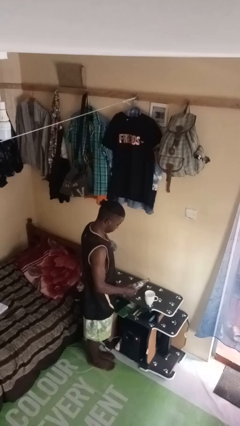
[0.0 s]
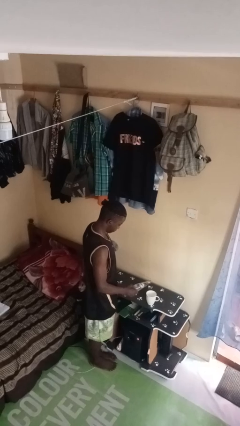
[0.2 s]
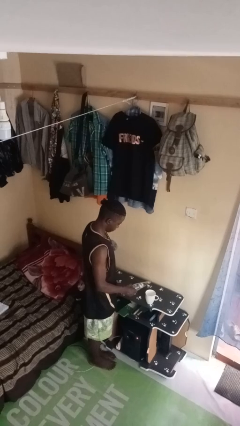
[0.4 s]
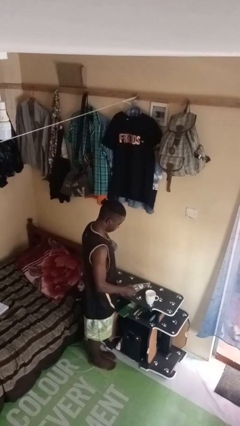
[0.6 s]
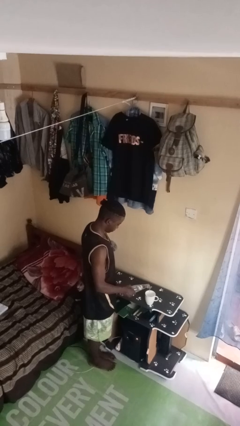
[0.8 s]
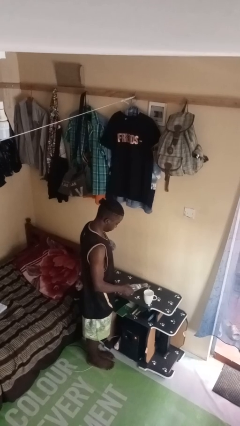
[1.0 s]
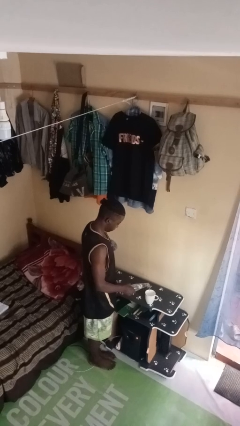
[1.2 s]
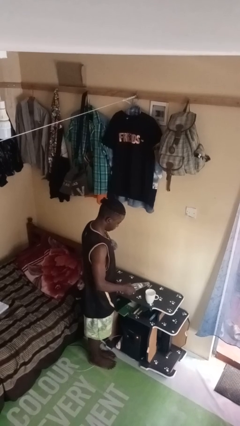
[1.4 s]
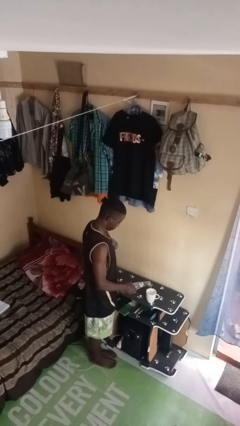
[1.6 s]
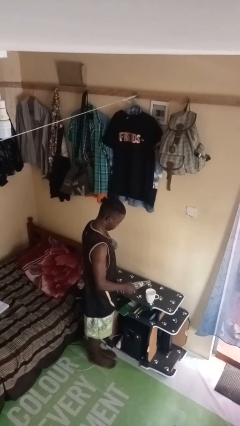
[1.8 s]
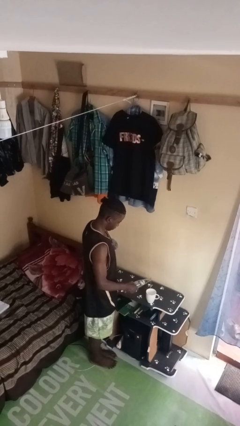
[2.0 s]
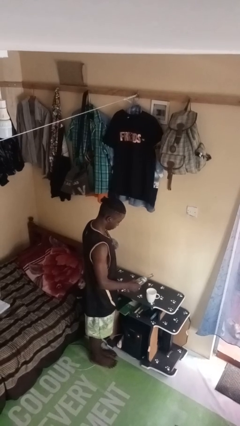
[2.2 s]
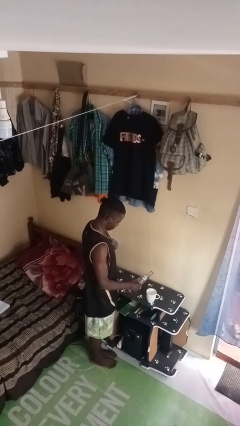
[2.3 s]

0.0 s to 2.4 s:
person pours liquid into cup

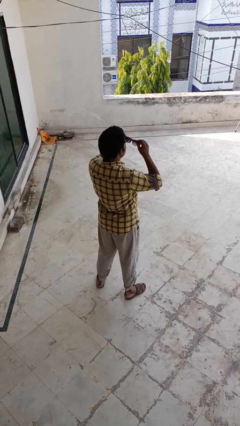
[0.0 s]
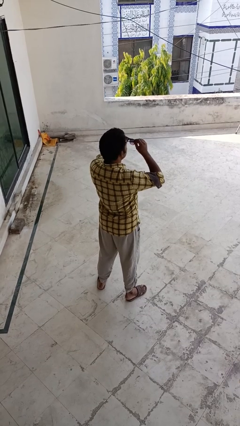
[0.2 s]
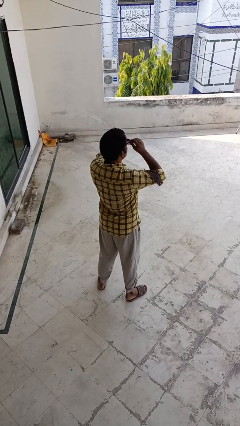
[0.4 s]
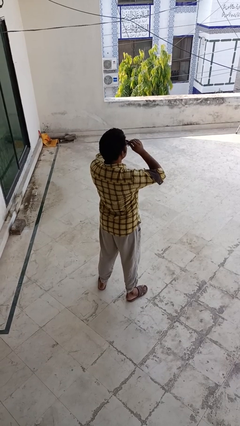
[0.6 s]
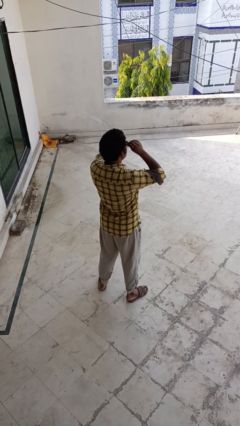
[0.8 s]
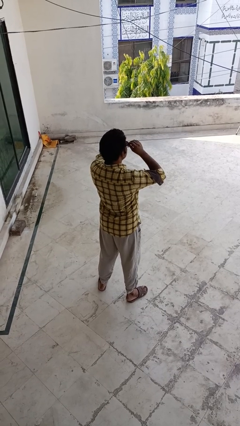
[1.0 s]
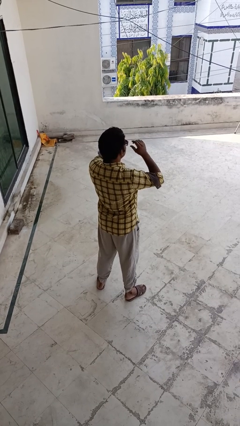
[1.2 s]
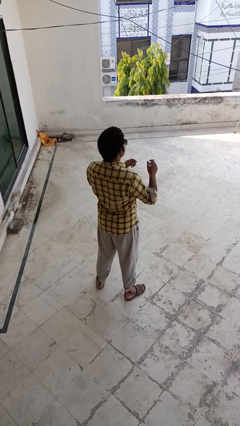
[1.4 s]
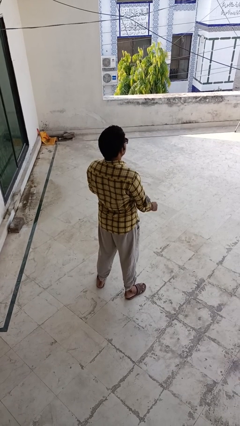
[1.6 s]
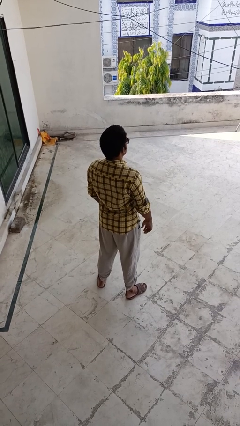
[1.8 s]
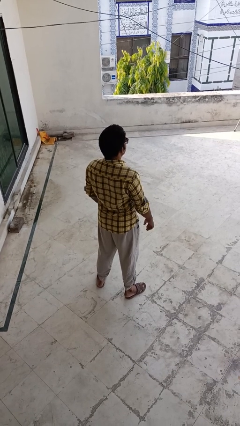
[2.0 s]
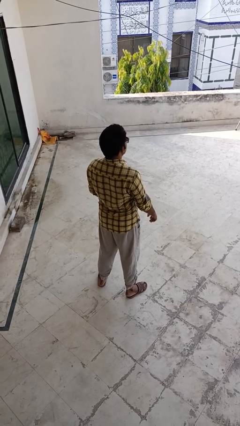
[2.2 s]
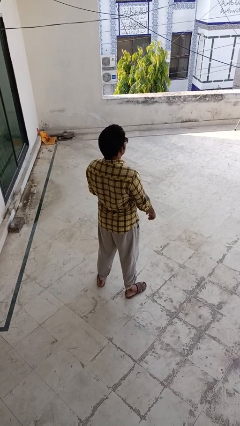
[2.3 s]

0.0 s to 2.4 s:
person puts on sunglasses

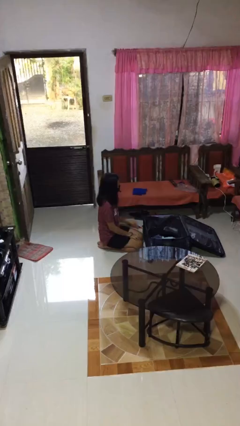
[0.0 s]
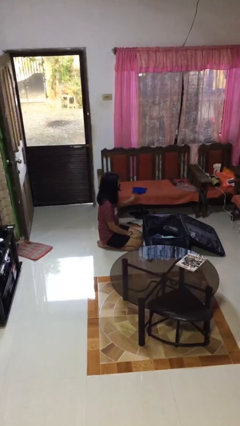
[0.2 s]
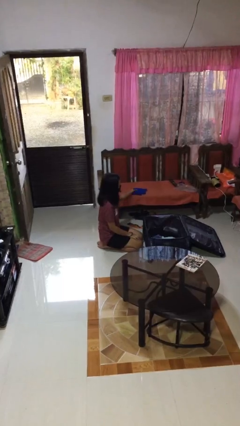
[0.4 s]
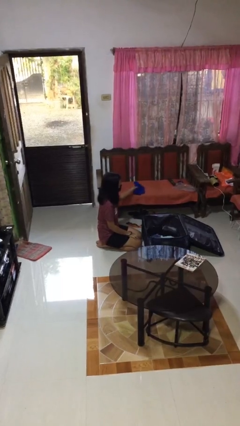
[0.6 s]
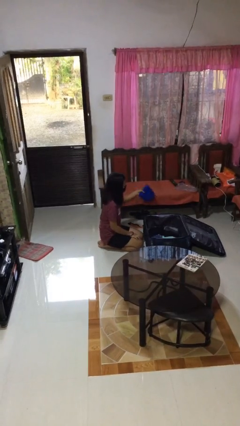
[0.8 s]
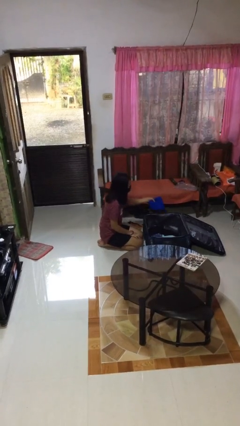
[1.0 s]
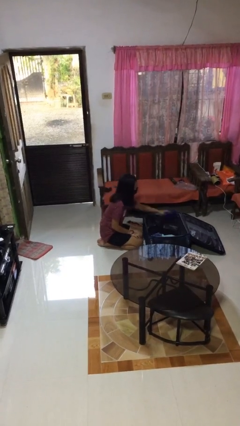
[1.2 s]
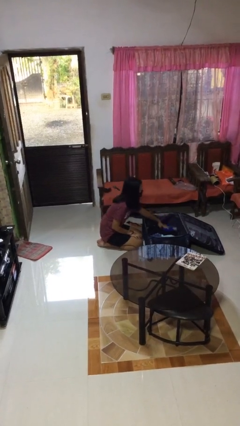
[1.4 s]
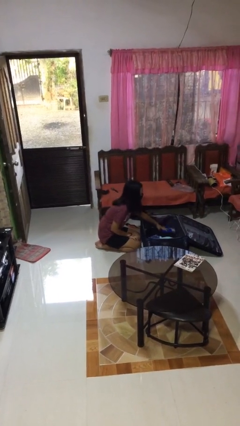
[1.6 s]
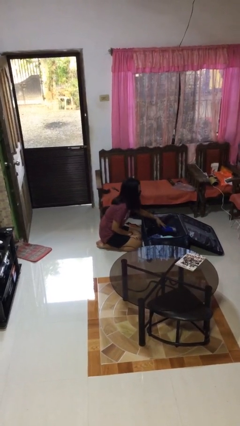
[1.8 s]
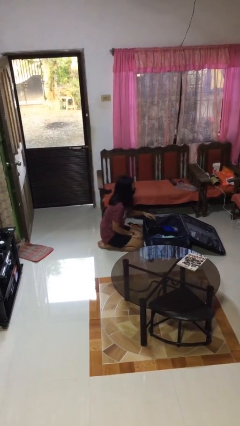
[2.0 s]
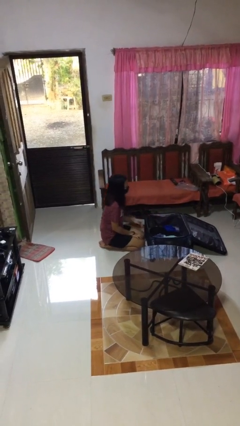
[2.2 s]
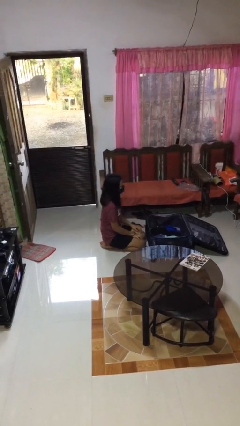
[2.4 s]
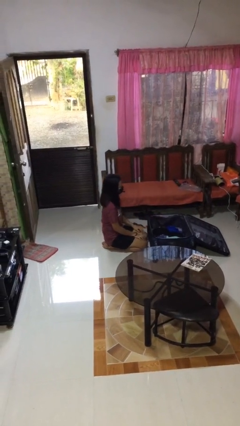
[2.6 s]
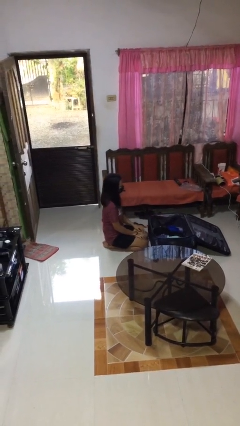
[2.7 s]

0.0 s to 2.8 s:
person loads clothes into suitcase

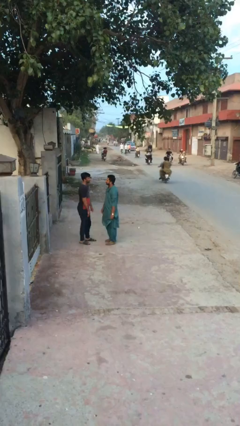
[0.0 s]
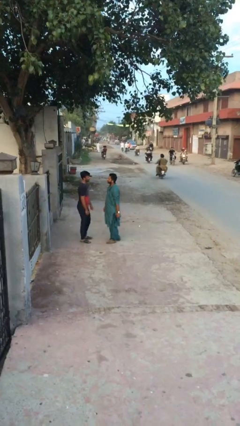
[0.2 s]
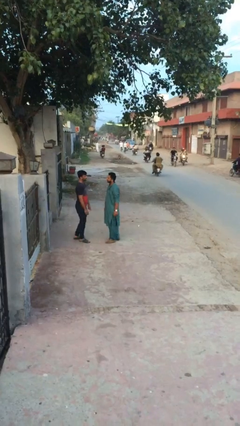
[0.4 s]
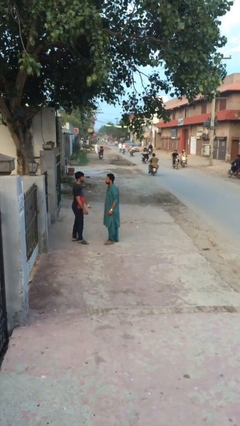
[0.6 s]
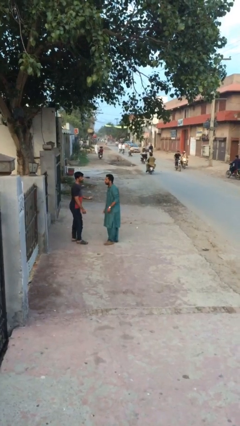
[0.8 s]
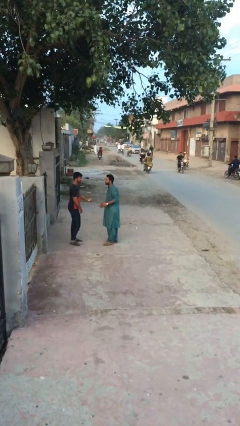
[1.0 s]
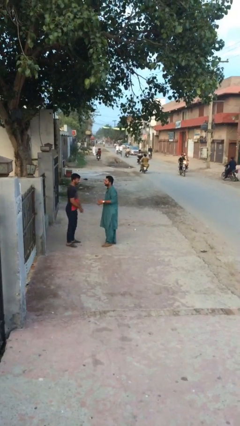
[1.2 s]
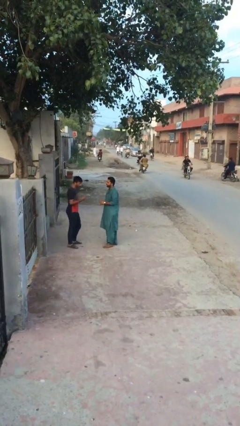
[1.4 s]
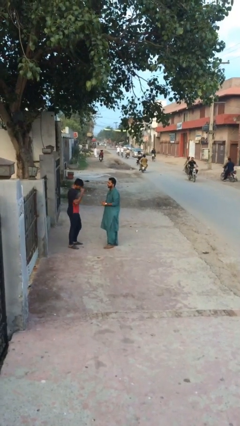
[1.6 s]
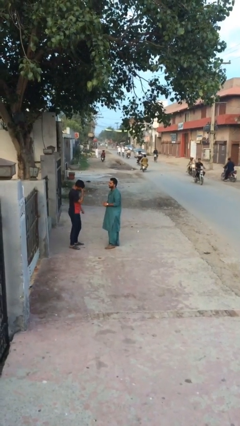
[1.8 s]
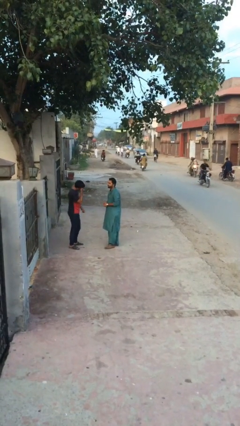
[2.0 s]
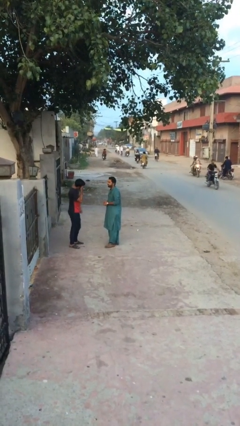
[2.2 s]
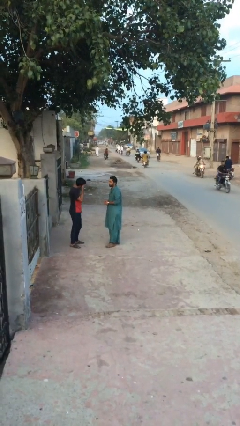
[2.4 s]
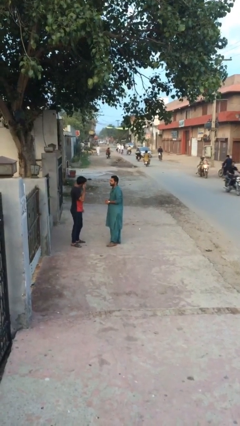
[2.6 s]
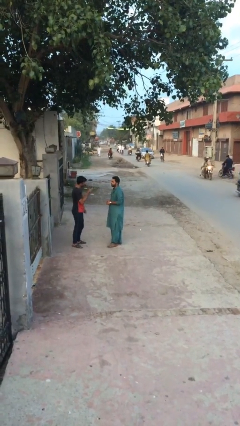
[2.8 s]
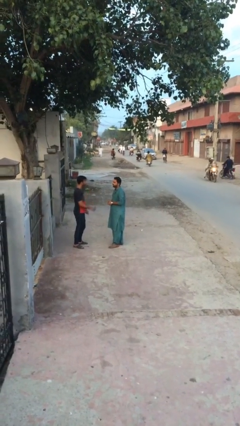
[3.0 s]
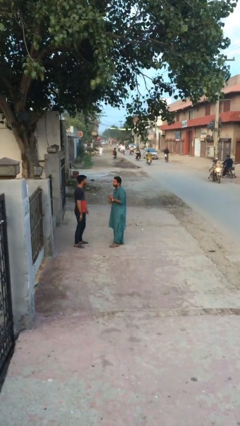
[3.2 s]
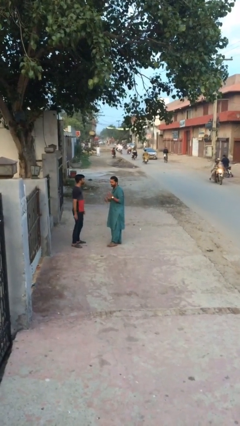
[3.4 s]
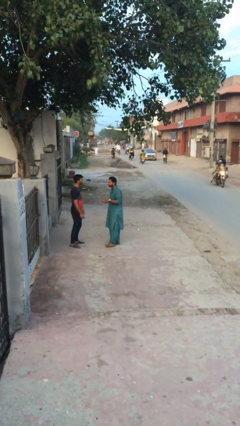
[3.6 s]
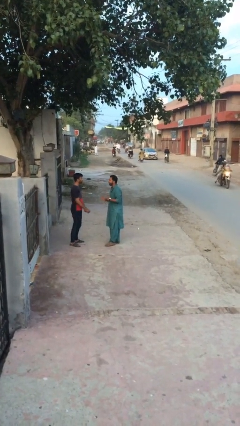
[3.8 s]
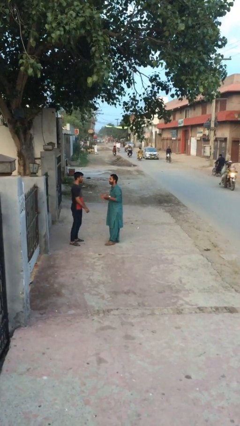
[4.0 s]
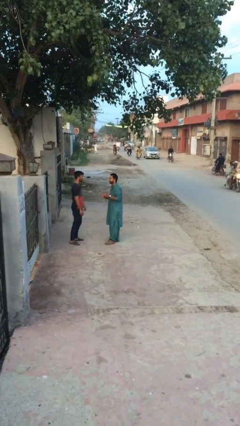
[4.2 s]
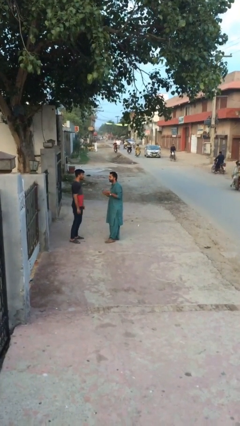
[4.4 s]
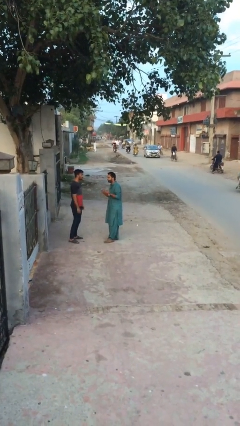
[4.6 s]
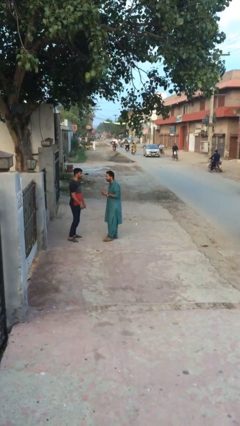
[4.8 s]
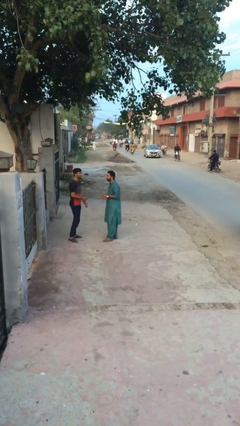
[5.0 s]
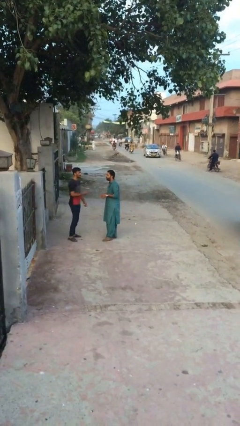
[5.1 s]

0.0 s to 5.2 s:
person talks to person

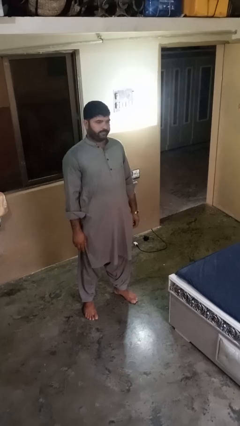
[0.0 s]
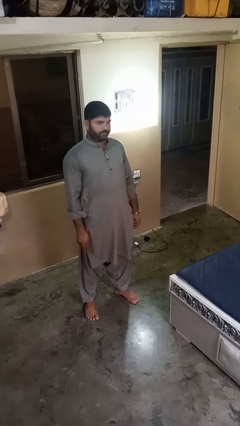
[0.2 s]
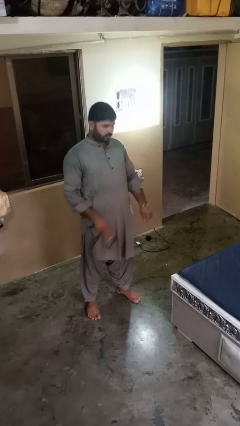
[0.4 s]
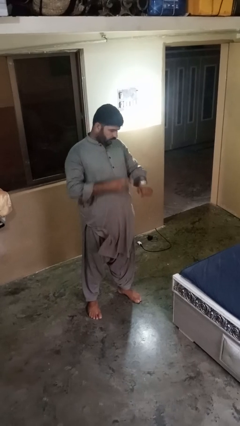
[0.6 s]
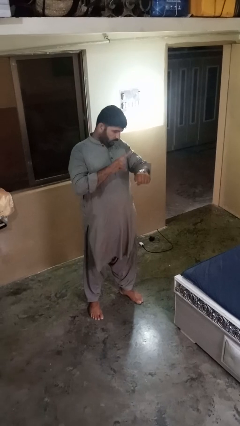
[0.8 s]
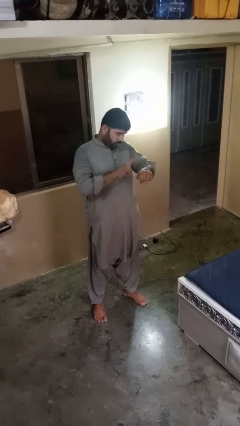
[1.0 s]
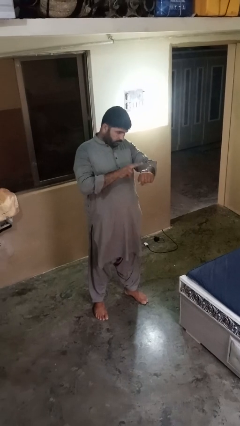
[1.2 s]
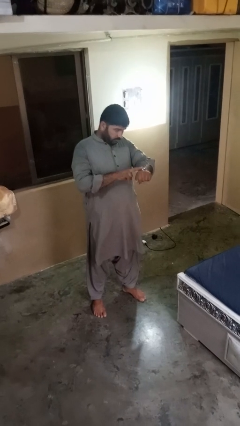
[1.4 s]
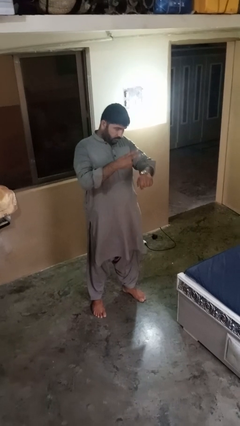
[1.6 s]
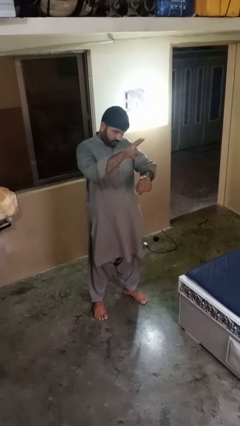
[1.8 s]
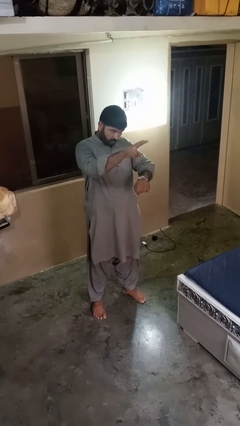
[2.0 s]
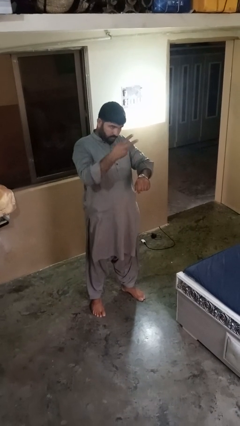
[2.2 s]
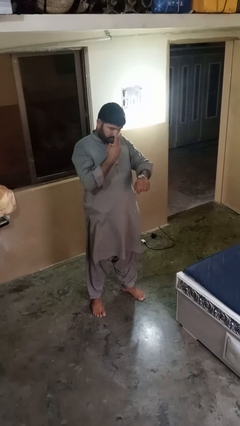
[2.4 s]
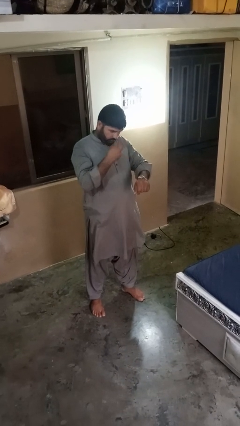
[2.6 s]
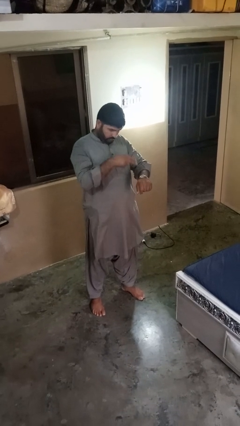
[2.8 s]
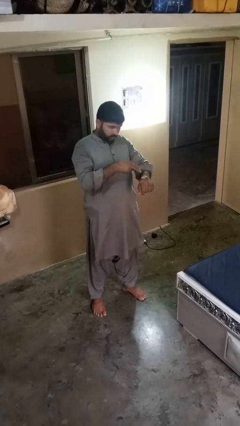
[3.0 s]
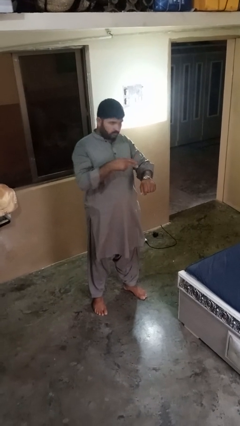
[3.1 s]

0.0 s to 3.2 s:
person gestures watch closely

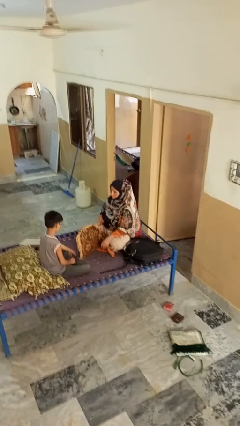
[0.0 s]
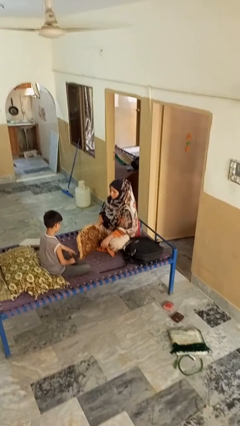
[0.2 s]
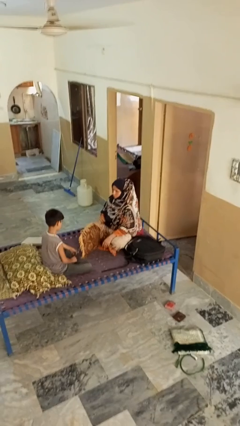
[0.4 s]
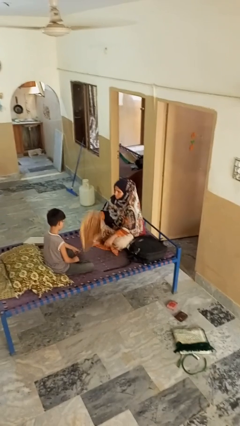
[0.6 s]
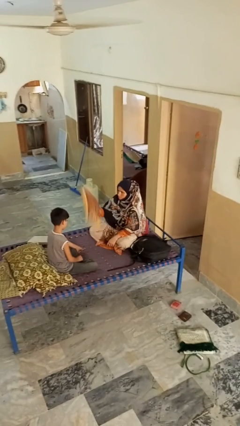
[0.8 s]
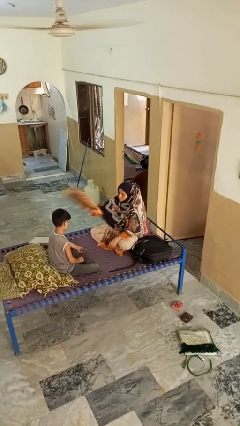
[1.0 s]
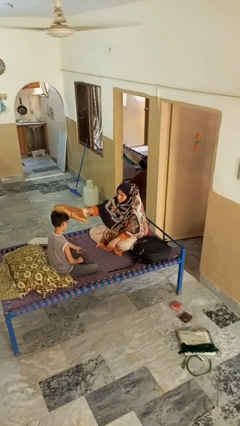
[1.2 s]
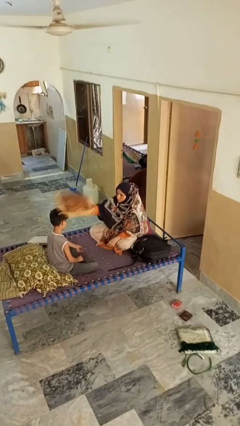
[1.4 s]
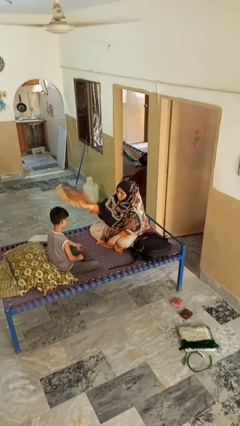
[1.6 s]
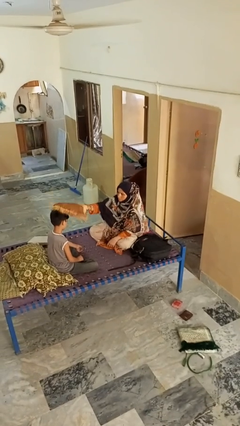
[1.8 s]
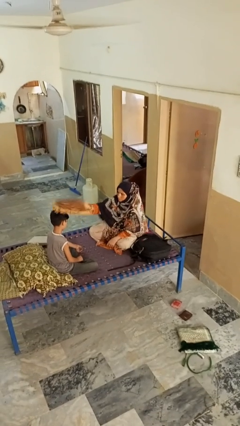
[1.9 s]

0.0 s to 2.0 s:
person hits person with pillow
